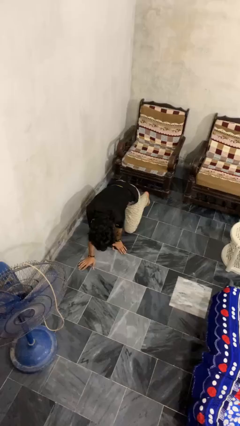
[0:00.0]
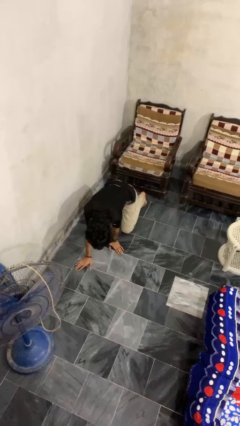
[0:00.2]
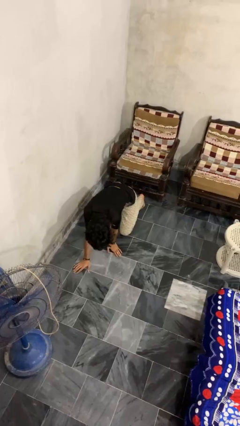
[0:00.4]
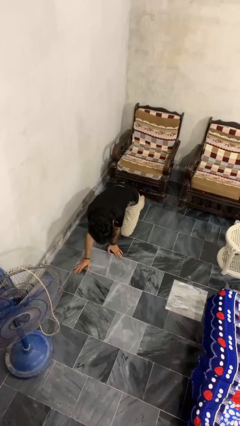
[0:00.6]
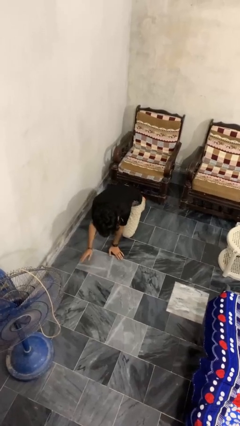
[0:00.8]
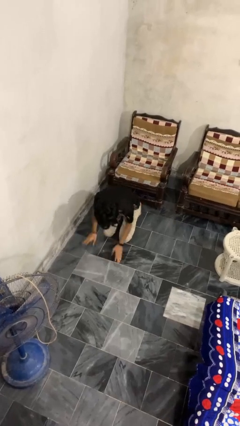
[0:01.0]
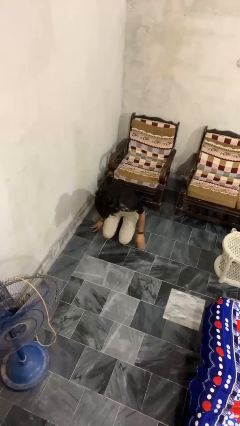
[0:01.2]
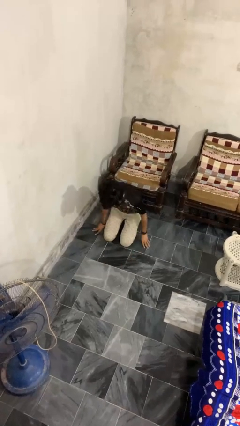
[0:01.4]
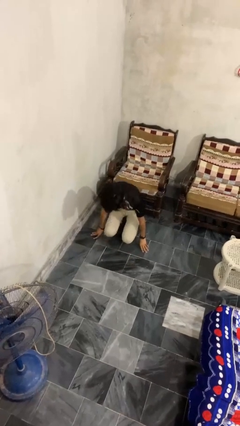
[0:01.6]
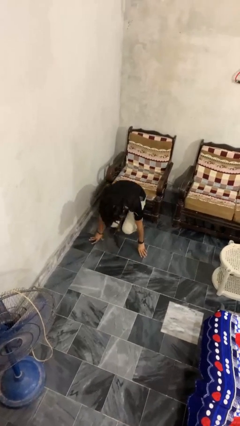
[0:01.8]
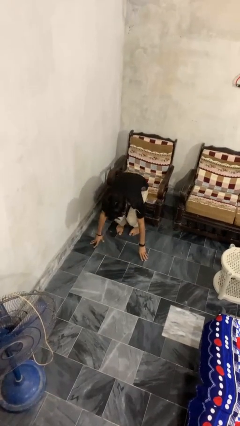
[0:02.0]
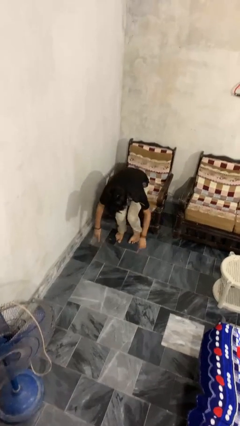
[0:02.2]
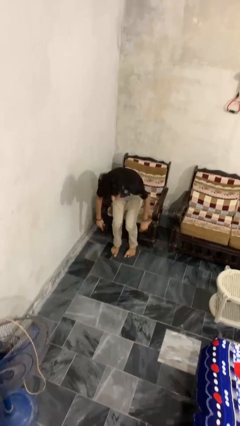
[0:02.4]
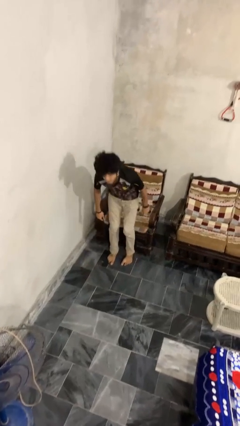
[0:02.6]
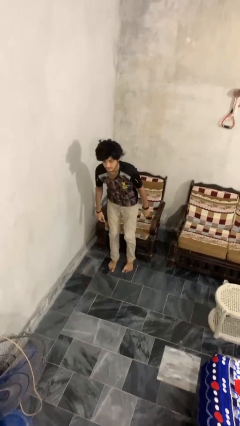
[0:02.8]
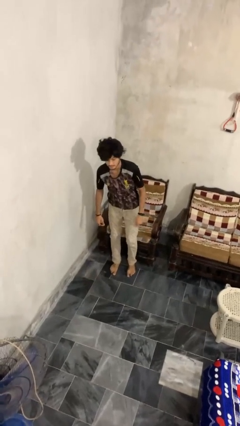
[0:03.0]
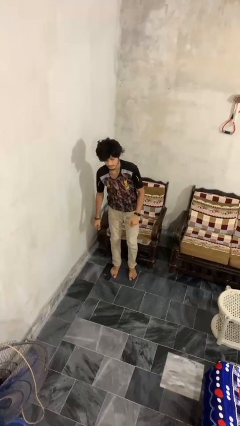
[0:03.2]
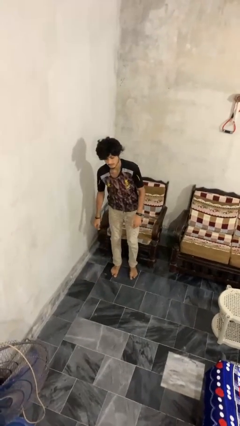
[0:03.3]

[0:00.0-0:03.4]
person stands up from floor

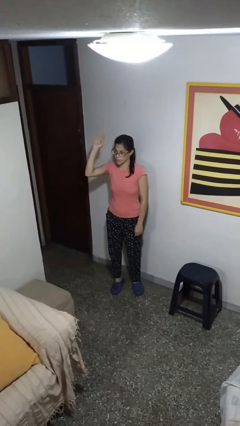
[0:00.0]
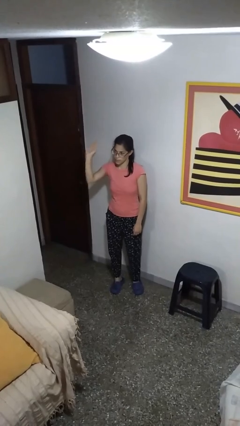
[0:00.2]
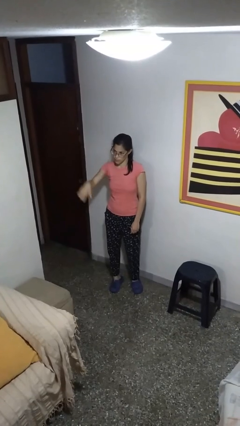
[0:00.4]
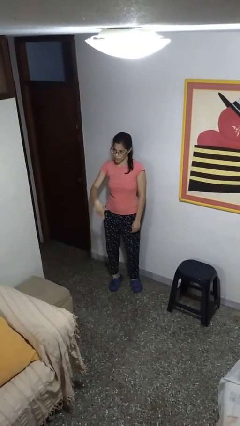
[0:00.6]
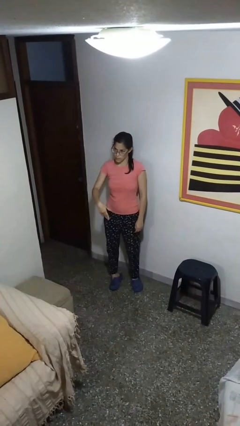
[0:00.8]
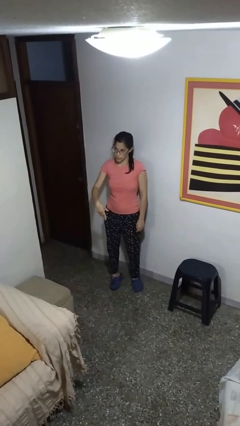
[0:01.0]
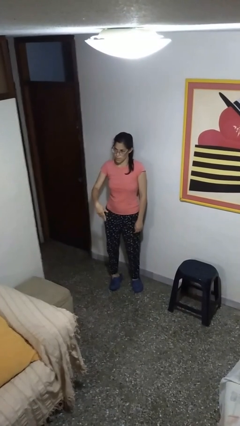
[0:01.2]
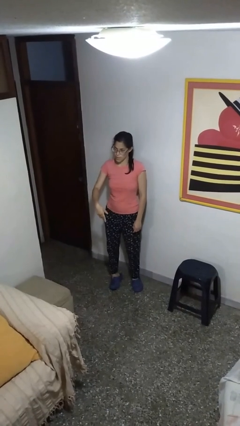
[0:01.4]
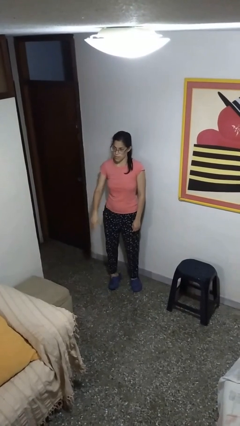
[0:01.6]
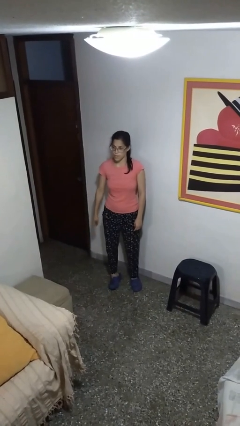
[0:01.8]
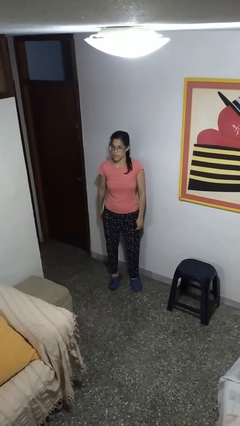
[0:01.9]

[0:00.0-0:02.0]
person gestures swipe down

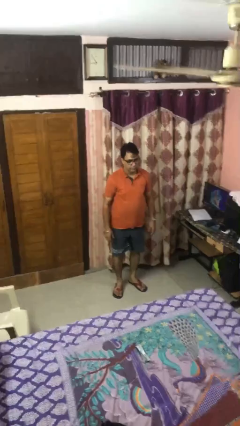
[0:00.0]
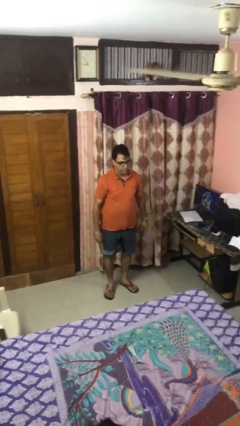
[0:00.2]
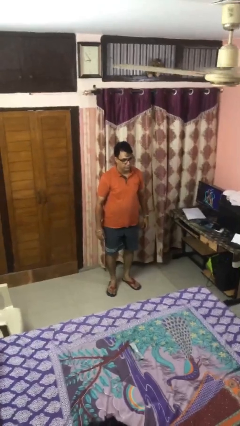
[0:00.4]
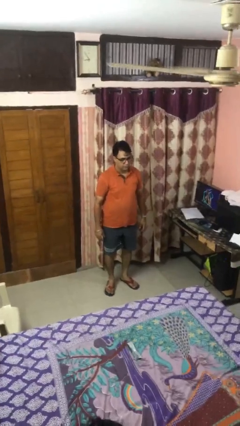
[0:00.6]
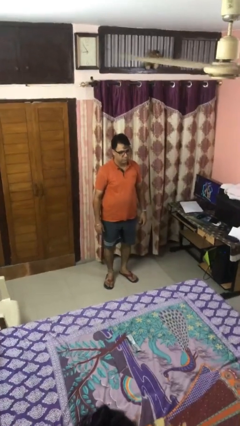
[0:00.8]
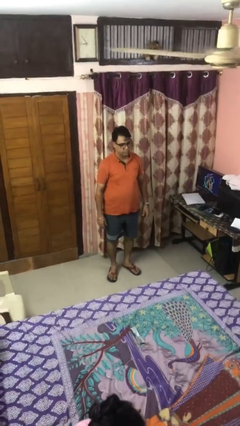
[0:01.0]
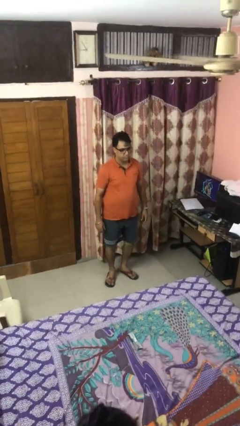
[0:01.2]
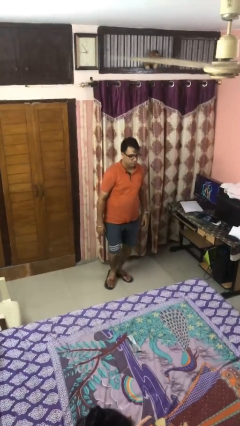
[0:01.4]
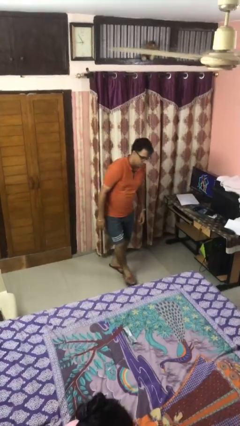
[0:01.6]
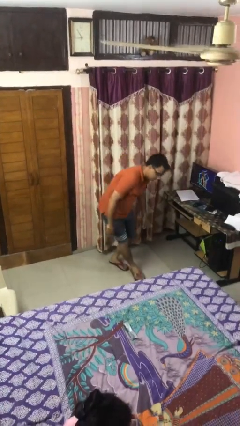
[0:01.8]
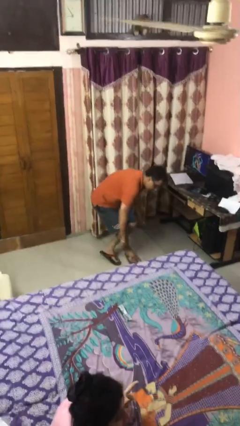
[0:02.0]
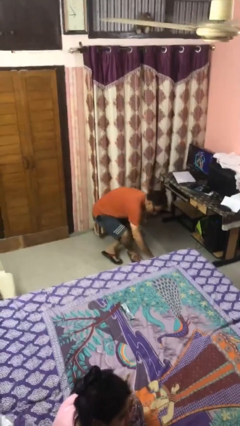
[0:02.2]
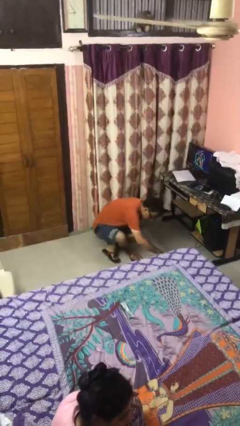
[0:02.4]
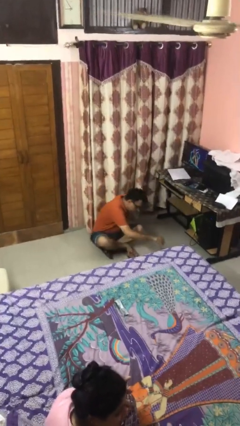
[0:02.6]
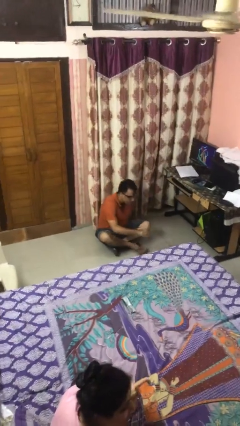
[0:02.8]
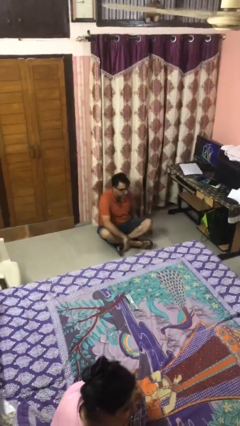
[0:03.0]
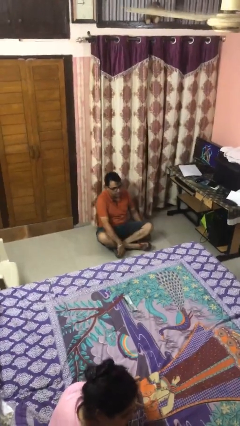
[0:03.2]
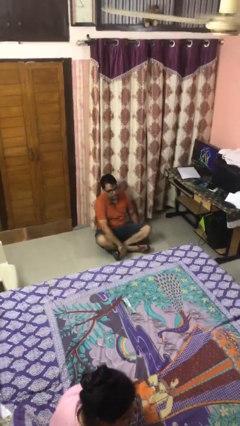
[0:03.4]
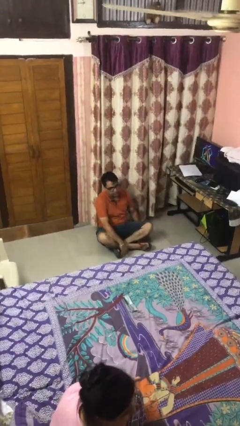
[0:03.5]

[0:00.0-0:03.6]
person sits crisscross

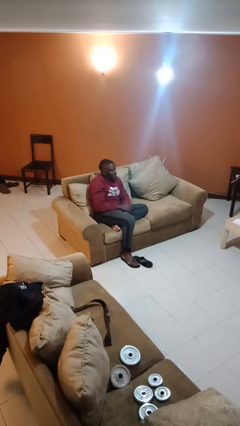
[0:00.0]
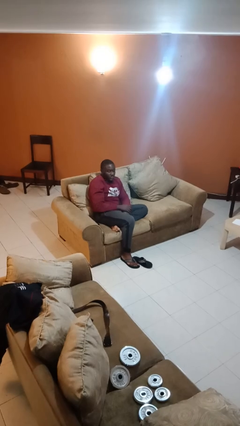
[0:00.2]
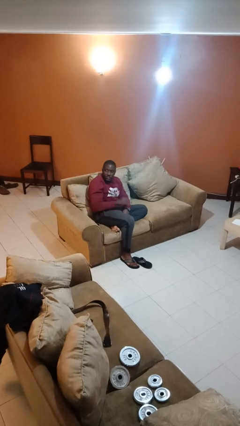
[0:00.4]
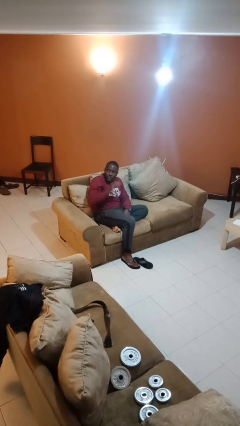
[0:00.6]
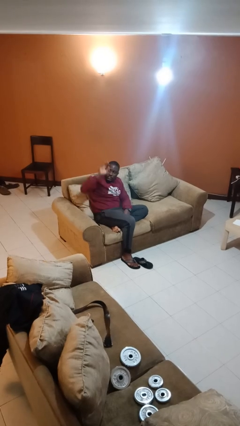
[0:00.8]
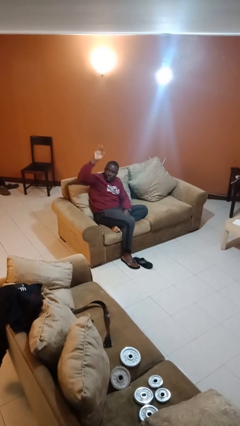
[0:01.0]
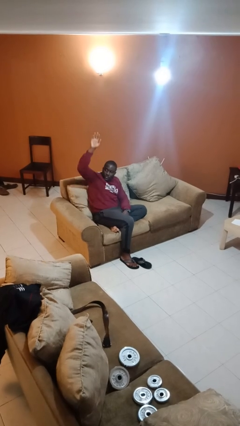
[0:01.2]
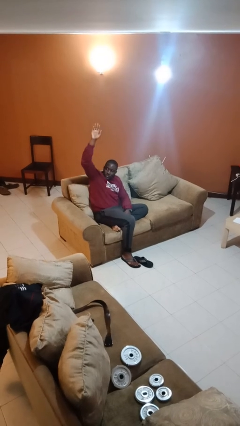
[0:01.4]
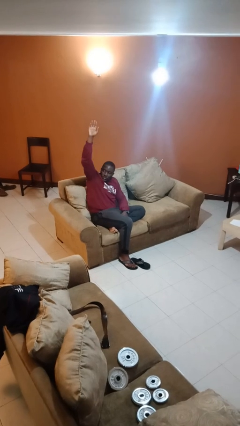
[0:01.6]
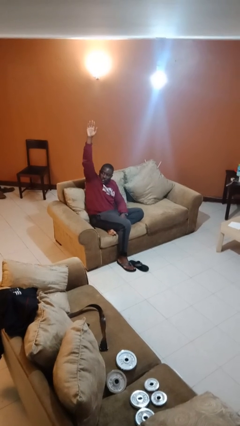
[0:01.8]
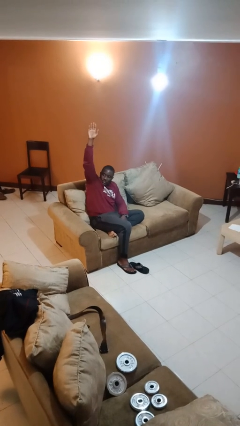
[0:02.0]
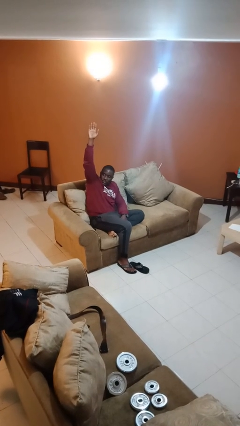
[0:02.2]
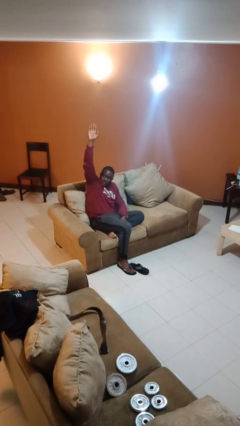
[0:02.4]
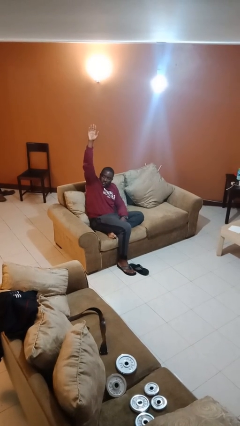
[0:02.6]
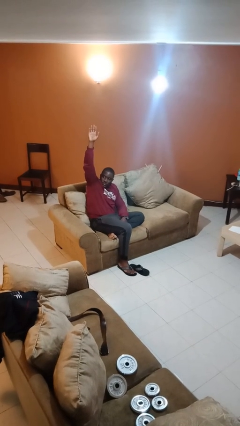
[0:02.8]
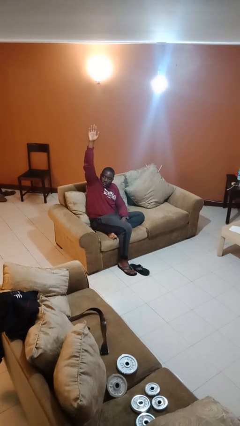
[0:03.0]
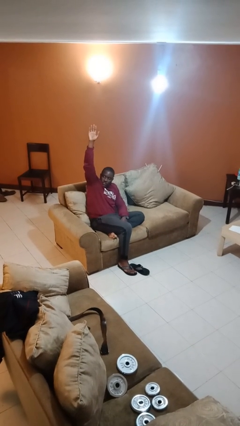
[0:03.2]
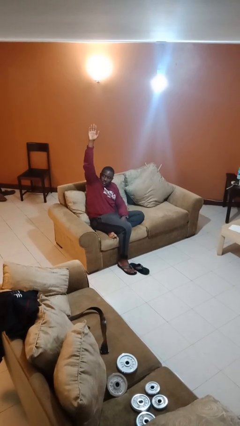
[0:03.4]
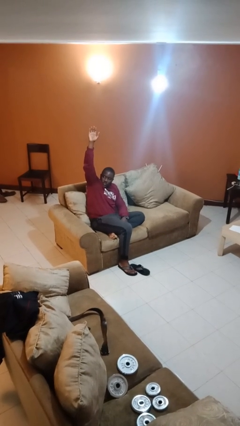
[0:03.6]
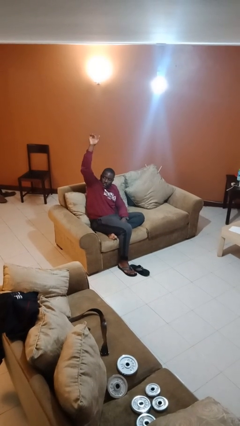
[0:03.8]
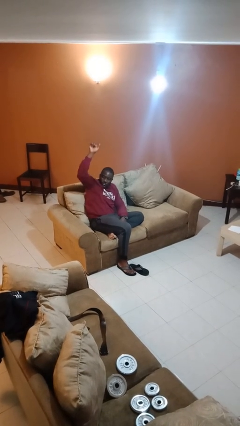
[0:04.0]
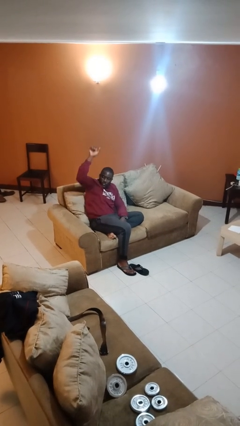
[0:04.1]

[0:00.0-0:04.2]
person gestures raise hand

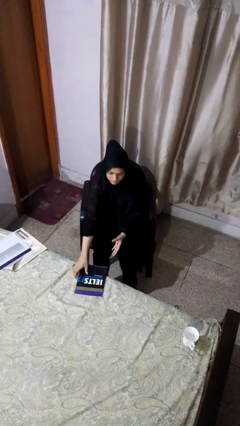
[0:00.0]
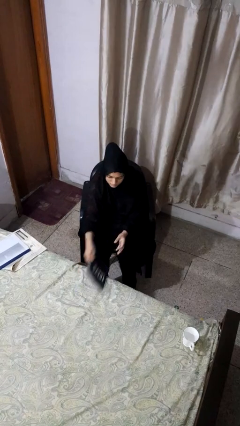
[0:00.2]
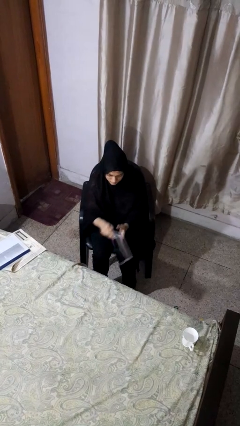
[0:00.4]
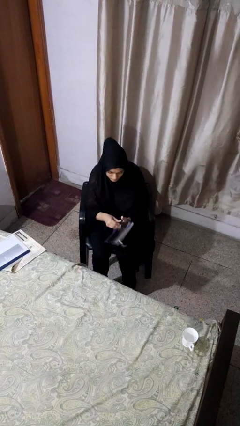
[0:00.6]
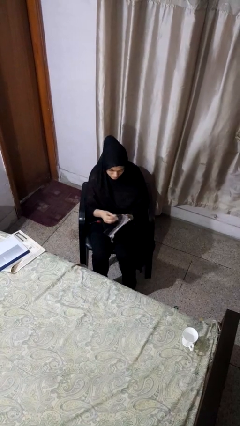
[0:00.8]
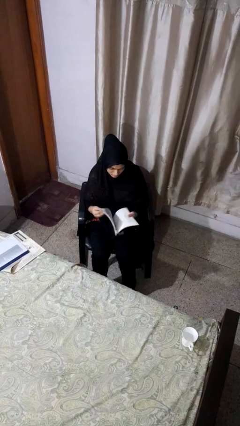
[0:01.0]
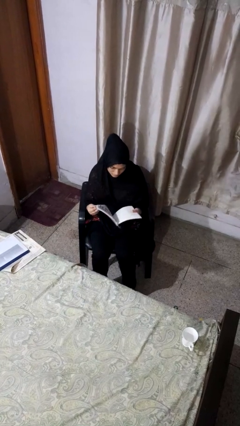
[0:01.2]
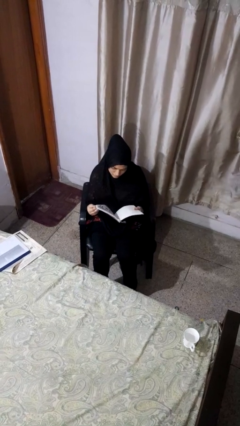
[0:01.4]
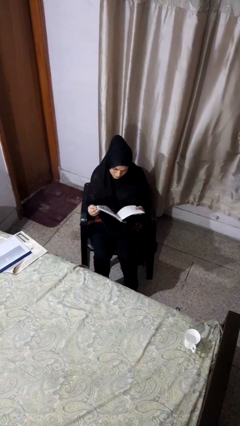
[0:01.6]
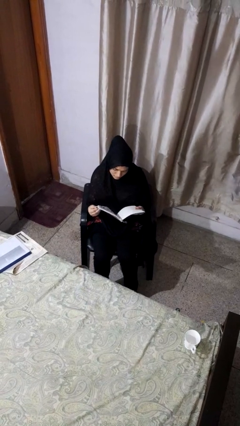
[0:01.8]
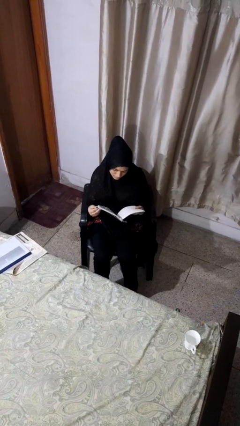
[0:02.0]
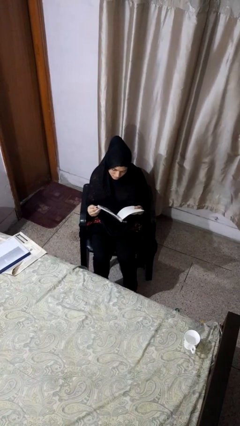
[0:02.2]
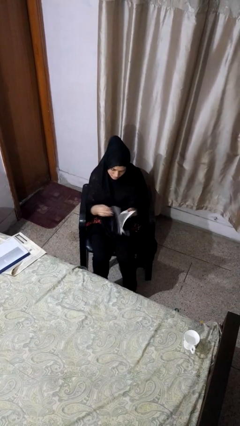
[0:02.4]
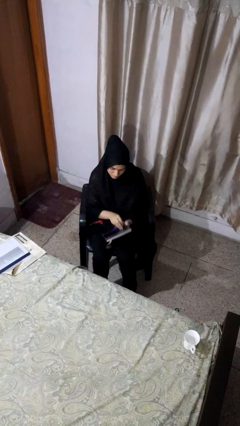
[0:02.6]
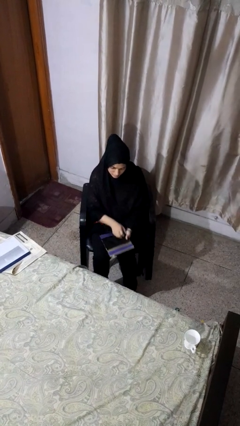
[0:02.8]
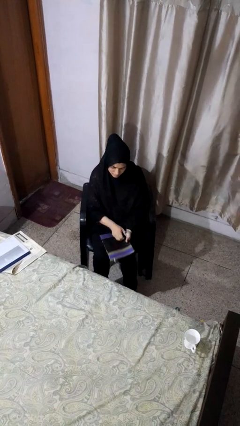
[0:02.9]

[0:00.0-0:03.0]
person reads book

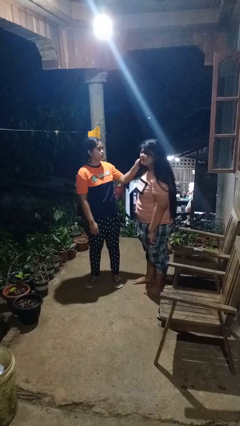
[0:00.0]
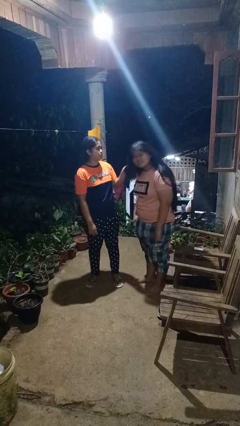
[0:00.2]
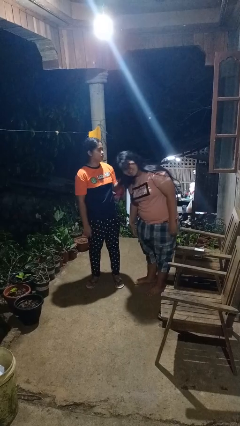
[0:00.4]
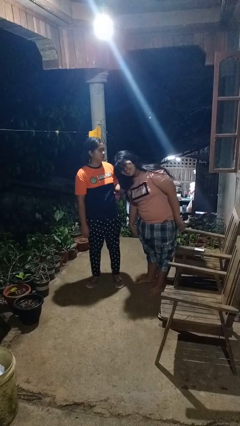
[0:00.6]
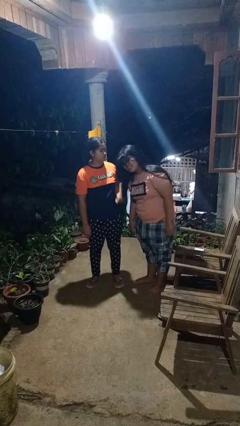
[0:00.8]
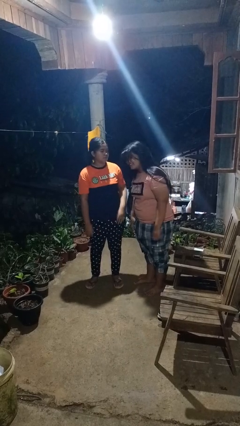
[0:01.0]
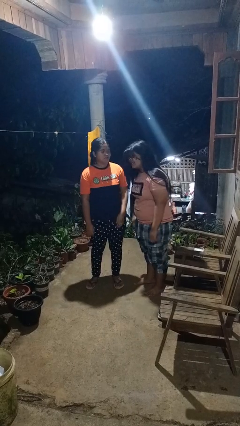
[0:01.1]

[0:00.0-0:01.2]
person grabs person by hair
